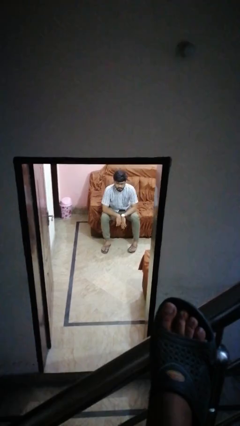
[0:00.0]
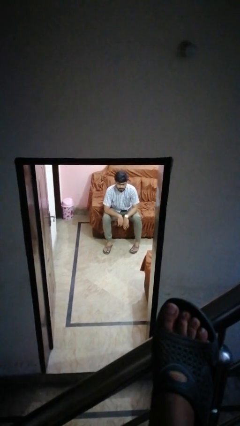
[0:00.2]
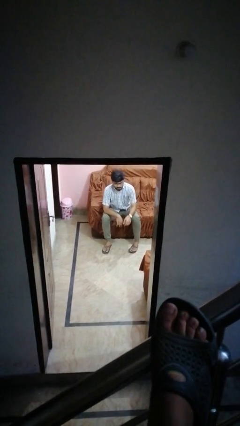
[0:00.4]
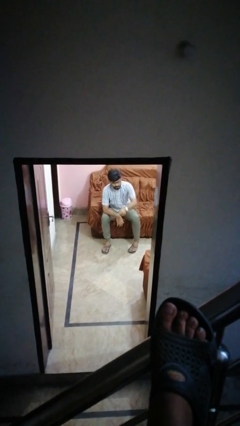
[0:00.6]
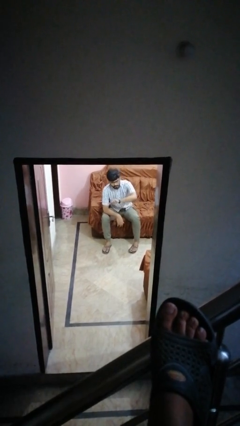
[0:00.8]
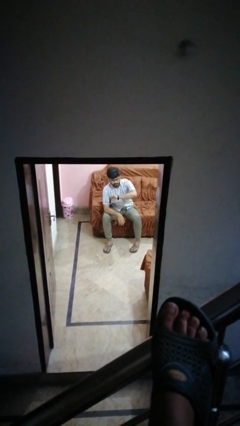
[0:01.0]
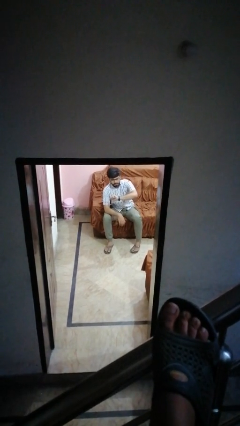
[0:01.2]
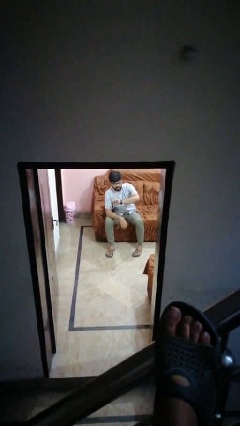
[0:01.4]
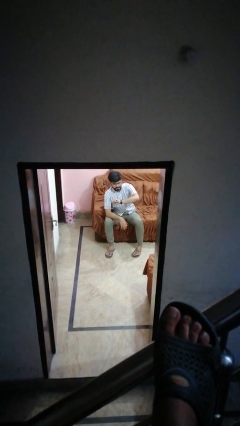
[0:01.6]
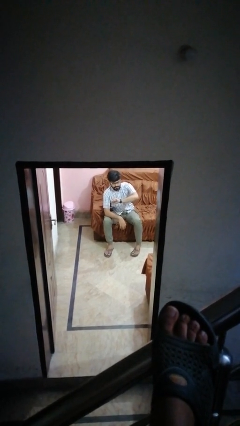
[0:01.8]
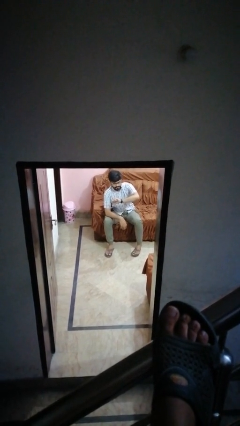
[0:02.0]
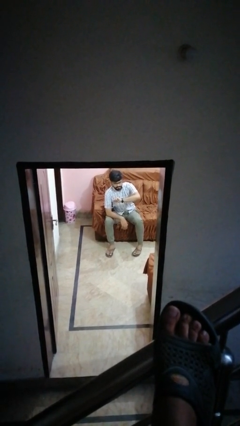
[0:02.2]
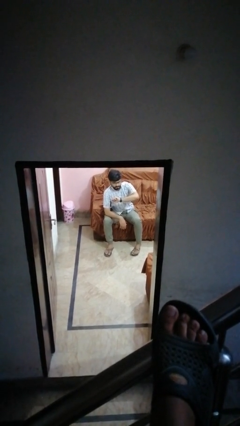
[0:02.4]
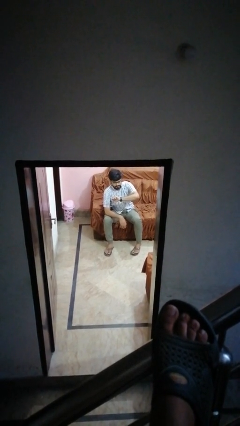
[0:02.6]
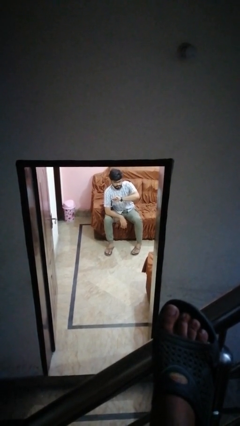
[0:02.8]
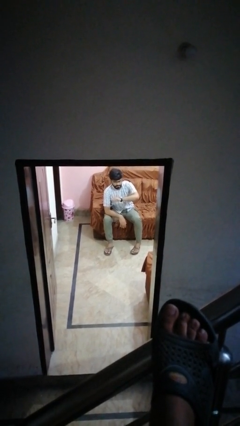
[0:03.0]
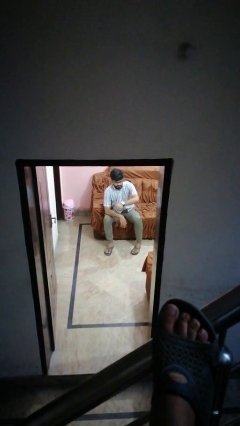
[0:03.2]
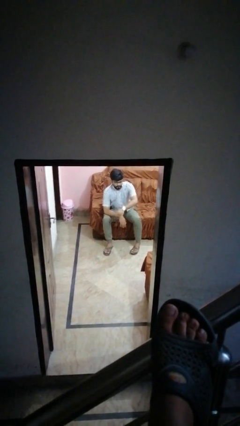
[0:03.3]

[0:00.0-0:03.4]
person looks at wristwatch

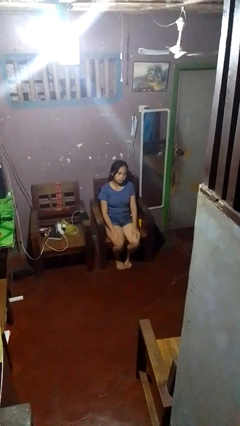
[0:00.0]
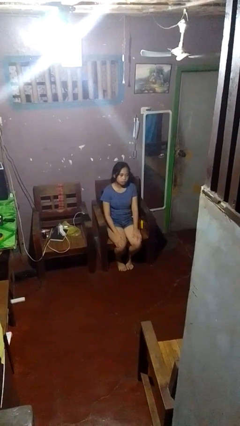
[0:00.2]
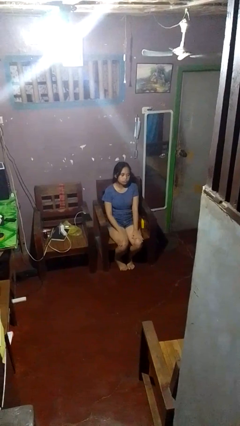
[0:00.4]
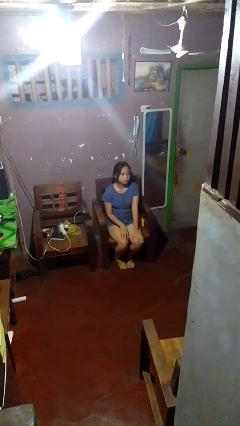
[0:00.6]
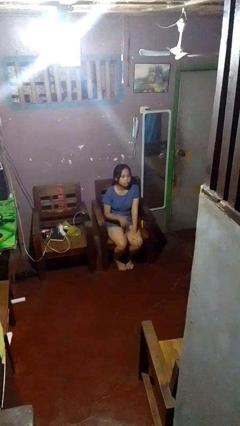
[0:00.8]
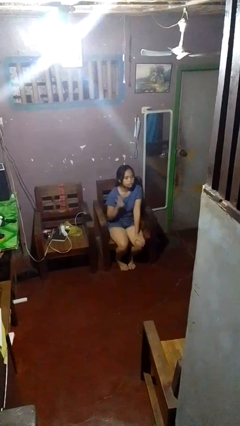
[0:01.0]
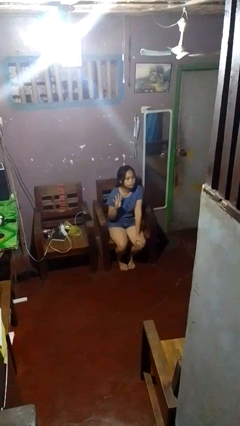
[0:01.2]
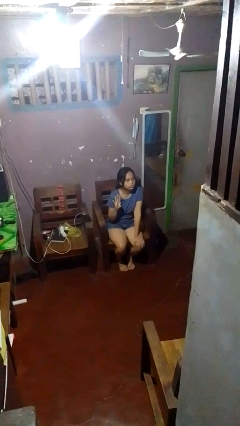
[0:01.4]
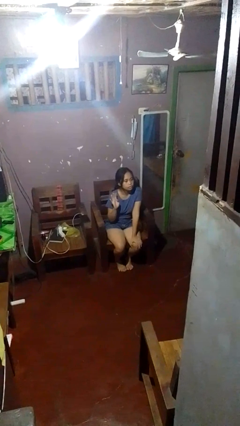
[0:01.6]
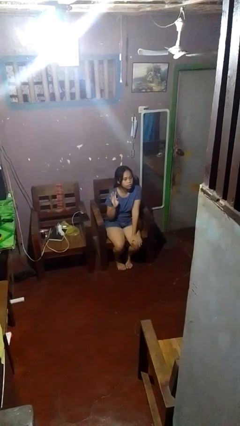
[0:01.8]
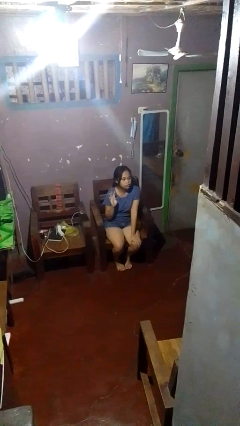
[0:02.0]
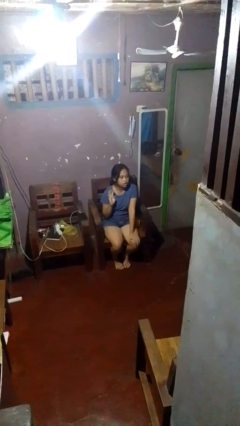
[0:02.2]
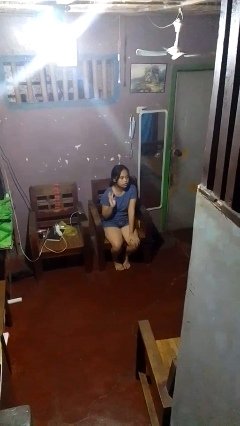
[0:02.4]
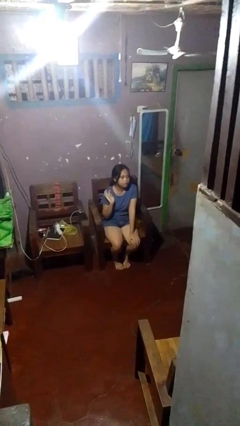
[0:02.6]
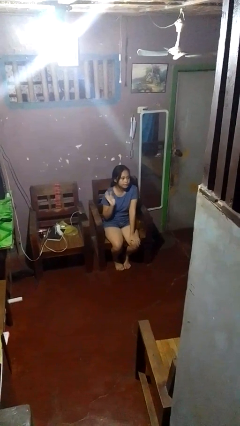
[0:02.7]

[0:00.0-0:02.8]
person gestures number four

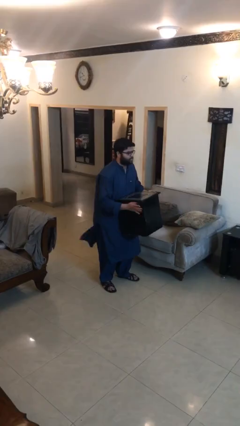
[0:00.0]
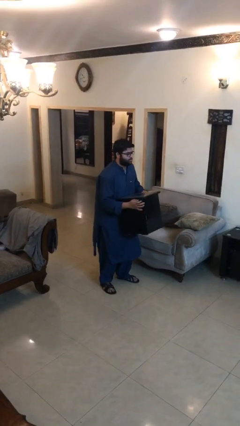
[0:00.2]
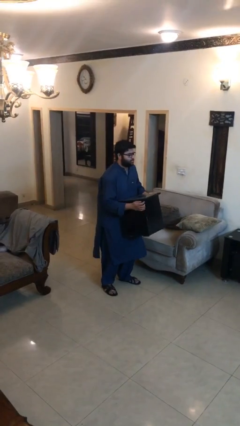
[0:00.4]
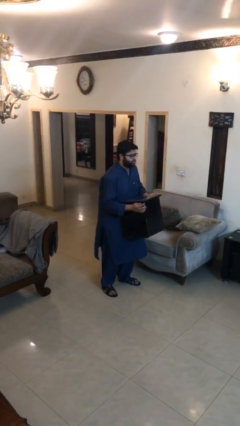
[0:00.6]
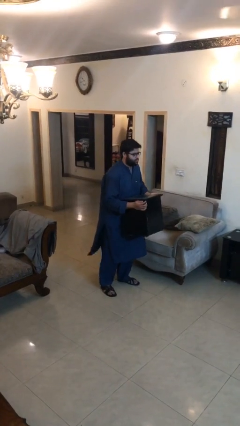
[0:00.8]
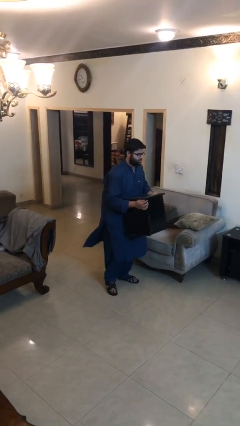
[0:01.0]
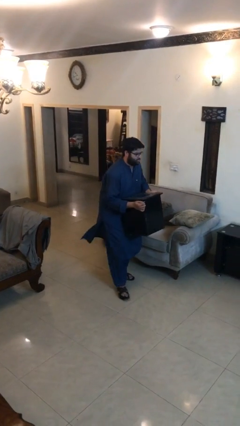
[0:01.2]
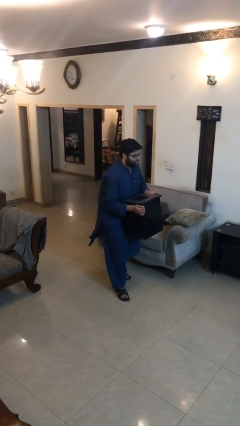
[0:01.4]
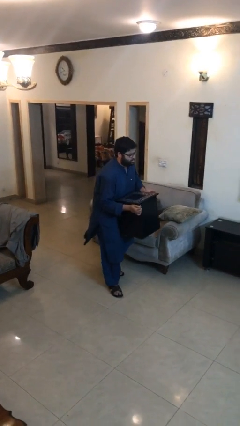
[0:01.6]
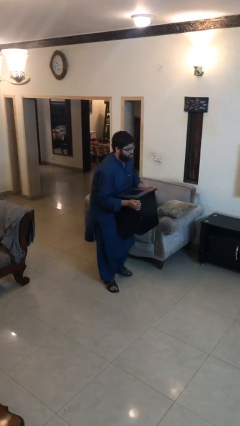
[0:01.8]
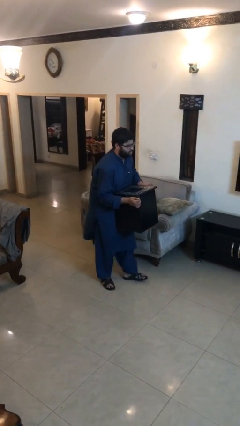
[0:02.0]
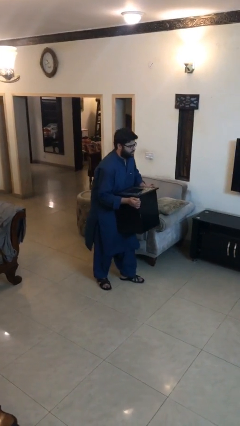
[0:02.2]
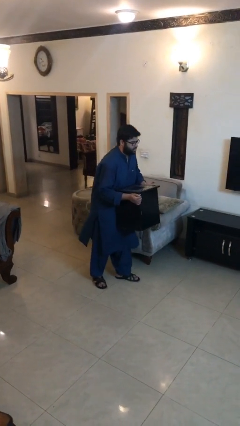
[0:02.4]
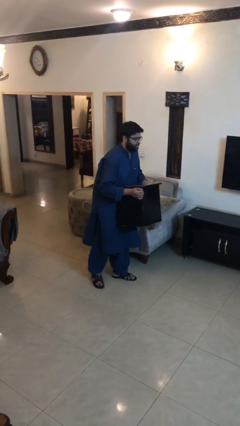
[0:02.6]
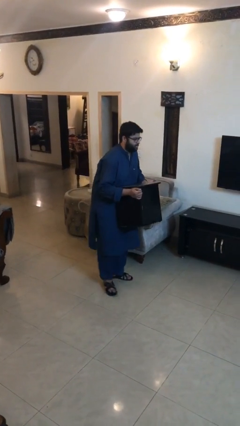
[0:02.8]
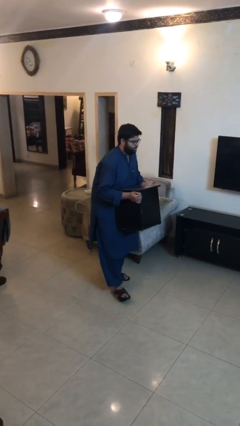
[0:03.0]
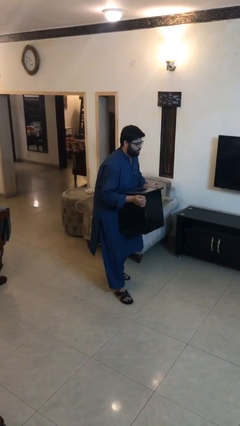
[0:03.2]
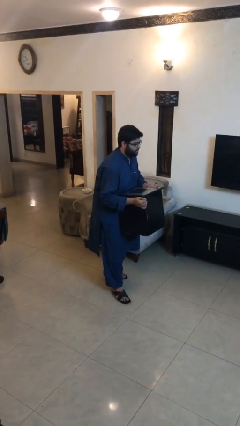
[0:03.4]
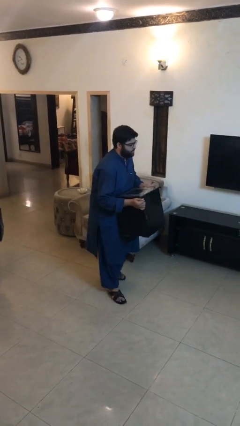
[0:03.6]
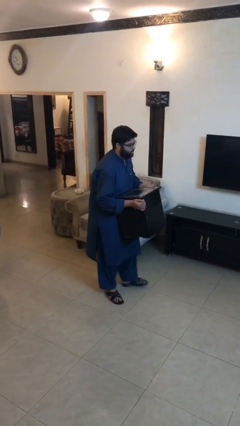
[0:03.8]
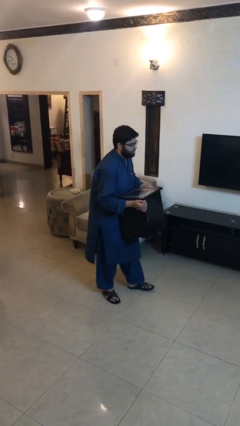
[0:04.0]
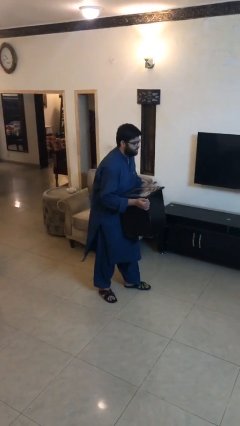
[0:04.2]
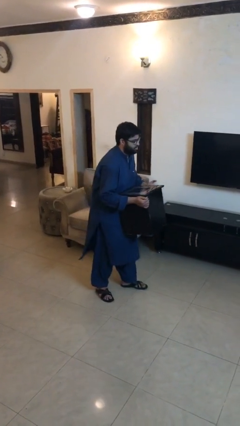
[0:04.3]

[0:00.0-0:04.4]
person carries heavy object

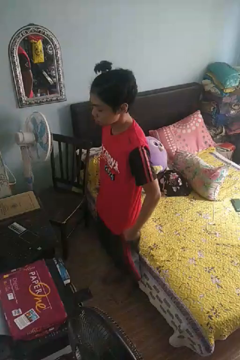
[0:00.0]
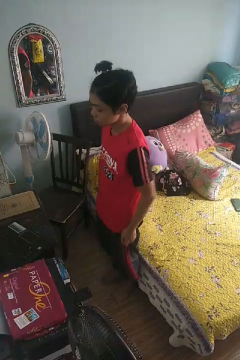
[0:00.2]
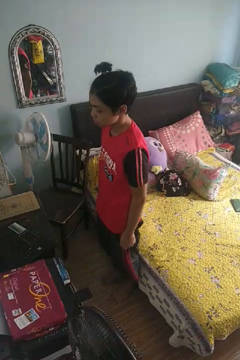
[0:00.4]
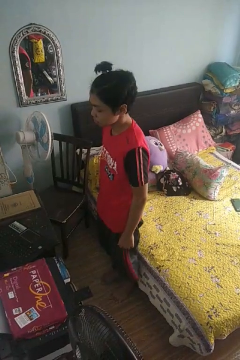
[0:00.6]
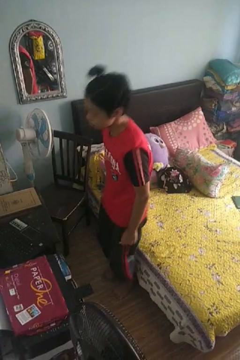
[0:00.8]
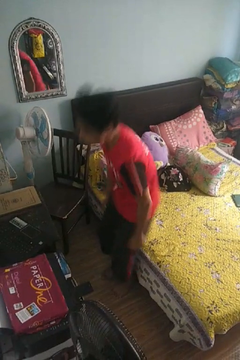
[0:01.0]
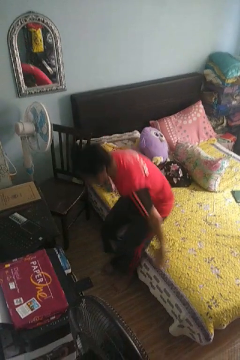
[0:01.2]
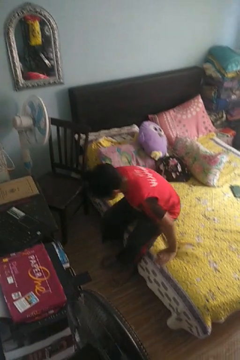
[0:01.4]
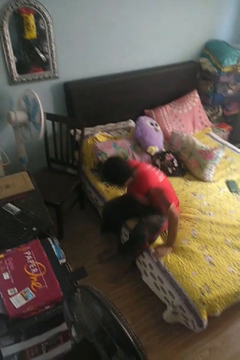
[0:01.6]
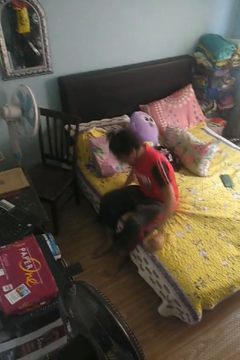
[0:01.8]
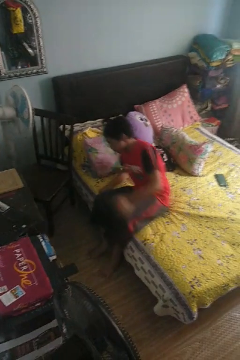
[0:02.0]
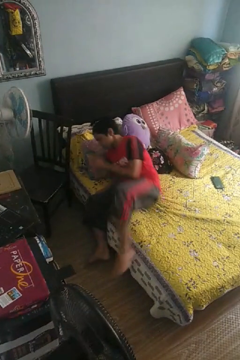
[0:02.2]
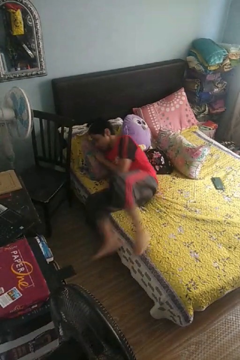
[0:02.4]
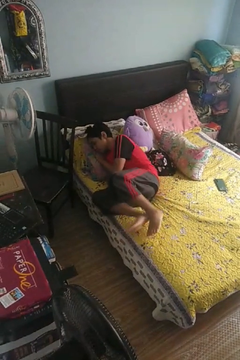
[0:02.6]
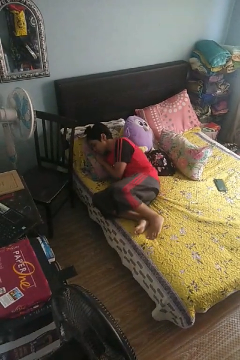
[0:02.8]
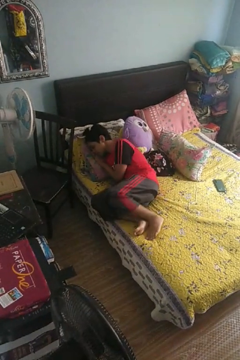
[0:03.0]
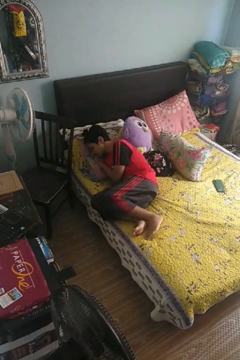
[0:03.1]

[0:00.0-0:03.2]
person lies down on bed

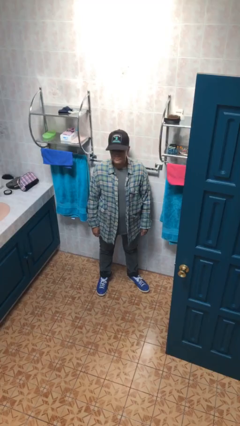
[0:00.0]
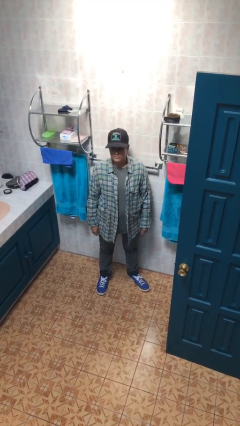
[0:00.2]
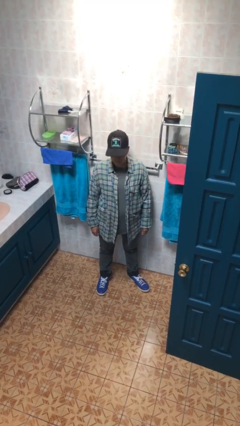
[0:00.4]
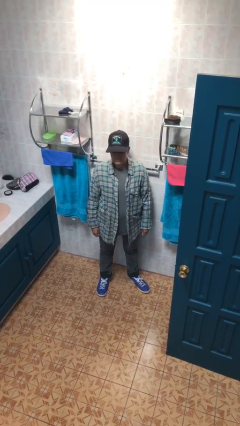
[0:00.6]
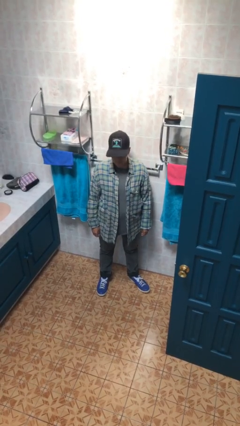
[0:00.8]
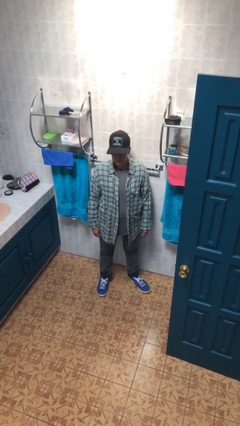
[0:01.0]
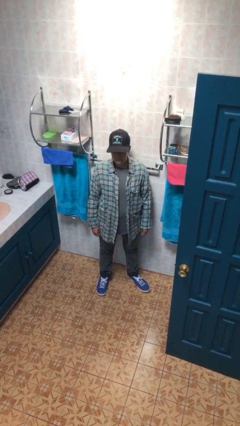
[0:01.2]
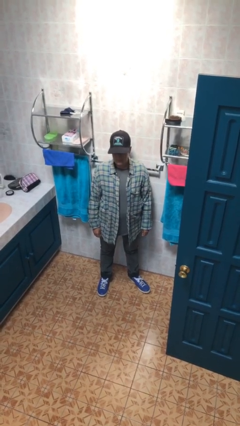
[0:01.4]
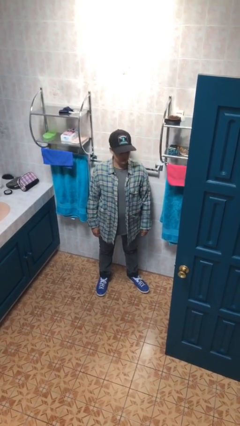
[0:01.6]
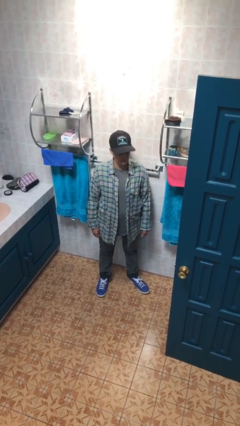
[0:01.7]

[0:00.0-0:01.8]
person nods head

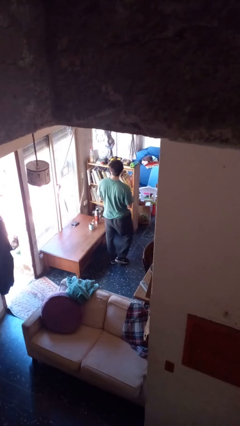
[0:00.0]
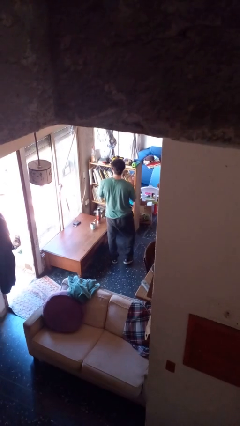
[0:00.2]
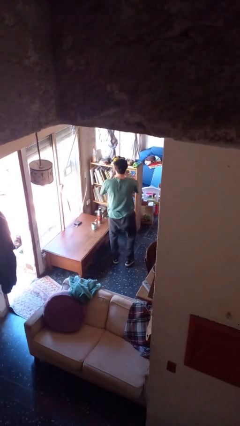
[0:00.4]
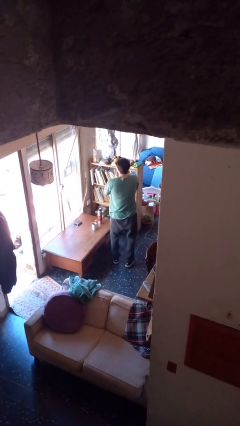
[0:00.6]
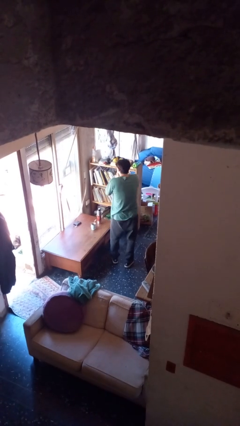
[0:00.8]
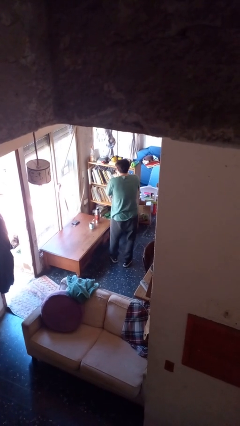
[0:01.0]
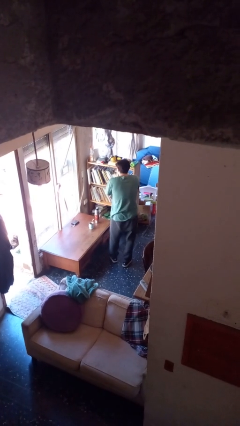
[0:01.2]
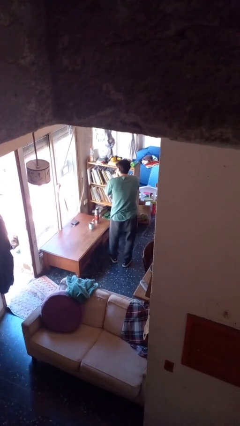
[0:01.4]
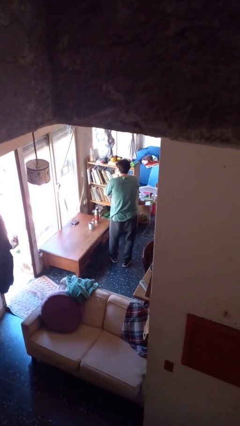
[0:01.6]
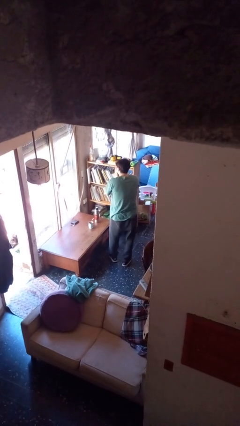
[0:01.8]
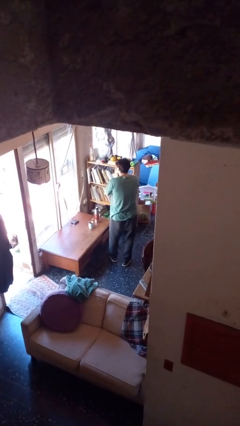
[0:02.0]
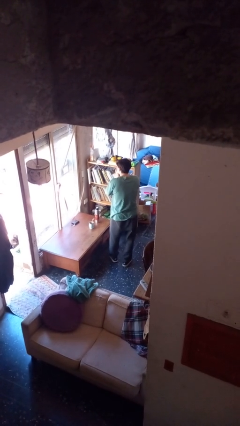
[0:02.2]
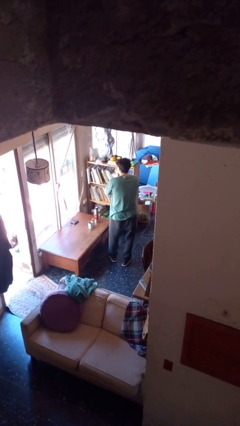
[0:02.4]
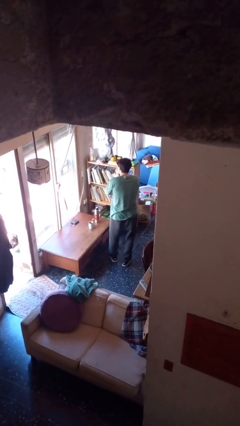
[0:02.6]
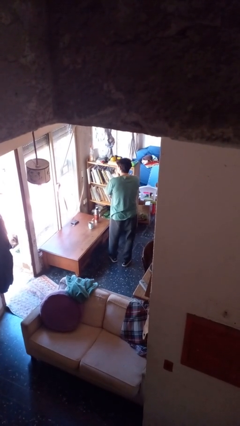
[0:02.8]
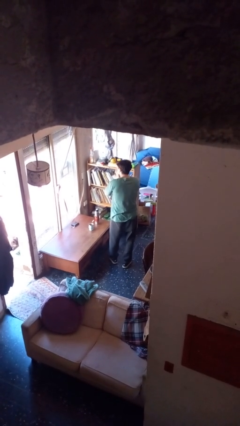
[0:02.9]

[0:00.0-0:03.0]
person blows nose
